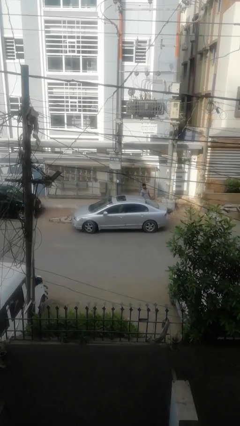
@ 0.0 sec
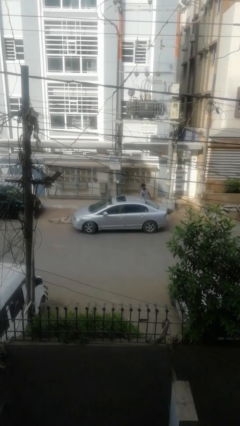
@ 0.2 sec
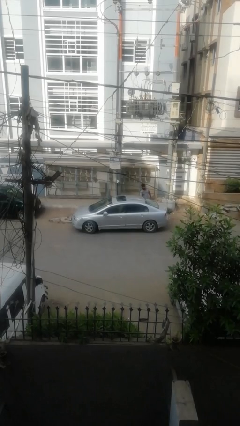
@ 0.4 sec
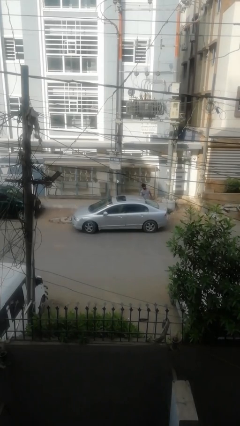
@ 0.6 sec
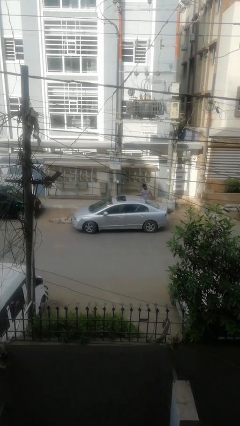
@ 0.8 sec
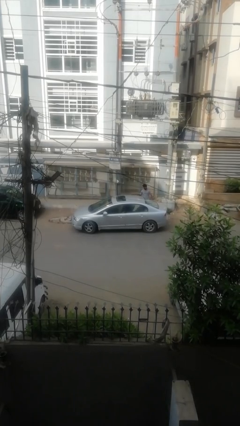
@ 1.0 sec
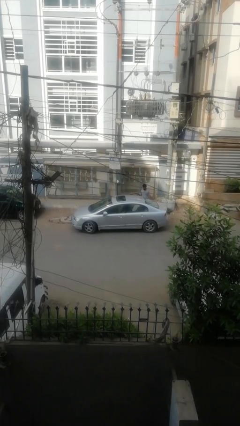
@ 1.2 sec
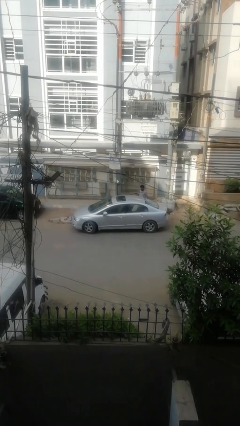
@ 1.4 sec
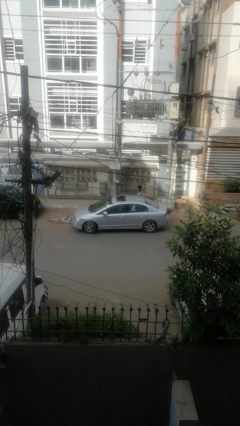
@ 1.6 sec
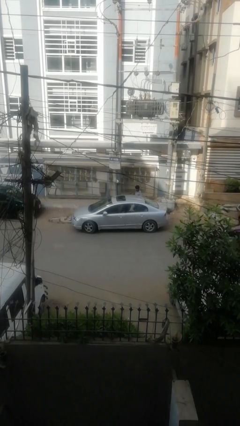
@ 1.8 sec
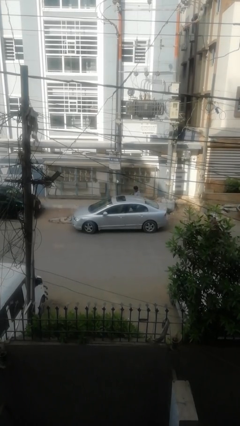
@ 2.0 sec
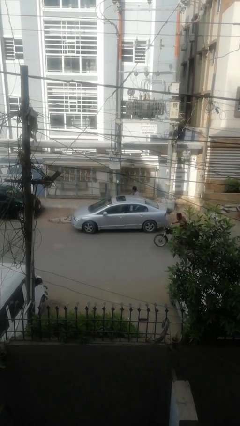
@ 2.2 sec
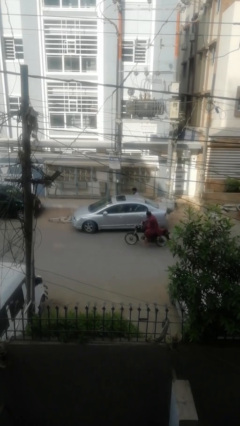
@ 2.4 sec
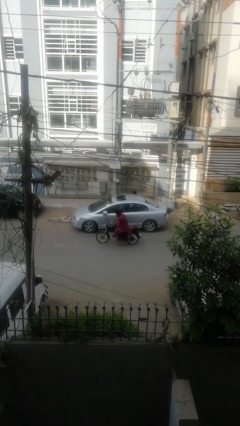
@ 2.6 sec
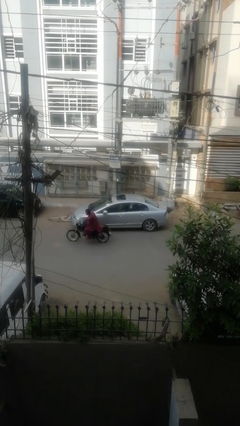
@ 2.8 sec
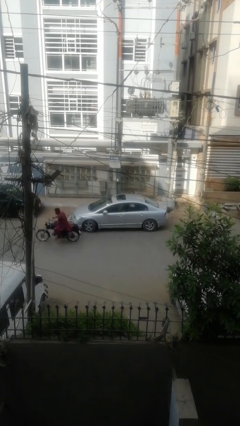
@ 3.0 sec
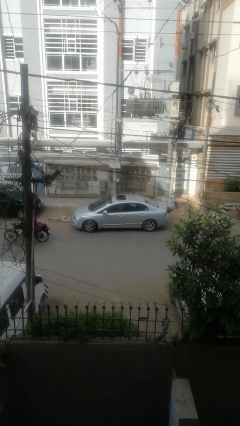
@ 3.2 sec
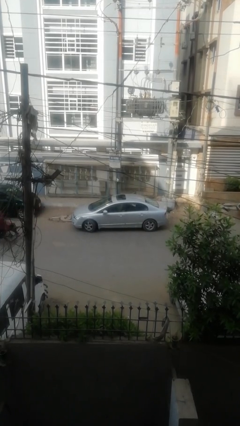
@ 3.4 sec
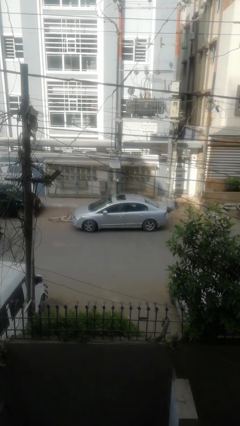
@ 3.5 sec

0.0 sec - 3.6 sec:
car picks up person

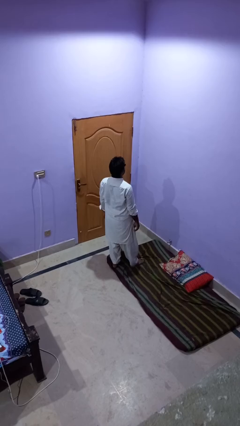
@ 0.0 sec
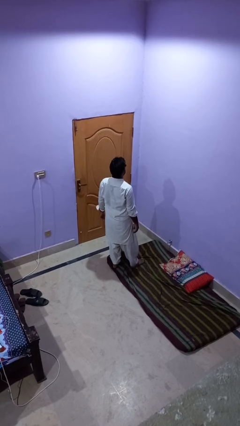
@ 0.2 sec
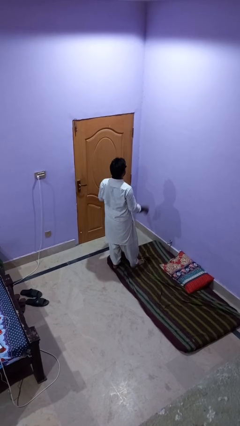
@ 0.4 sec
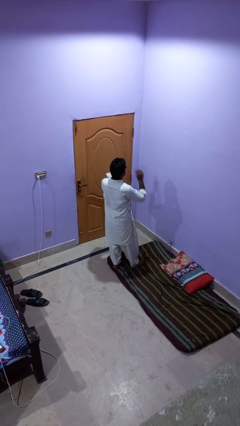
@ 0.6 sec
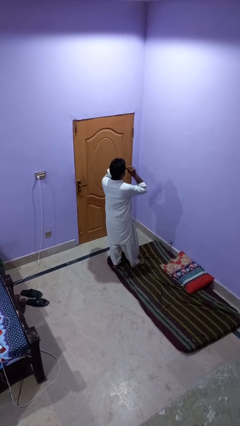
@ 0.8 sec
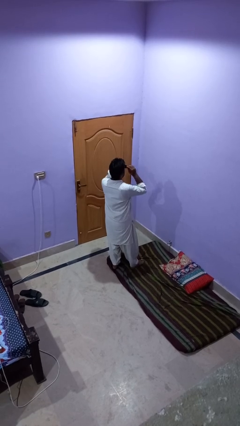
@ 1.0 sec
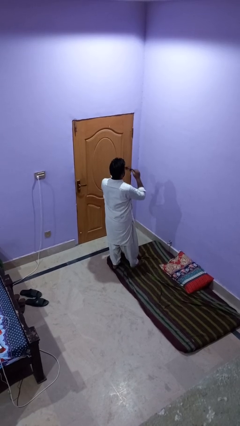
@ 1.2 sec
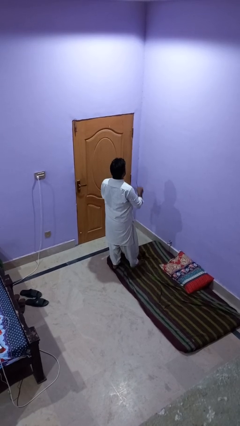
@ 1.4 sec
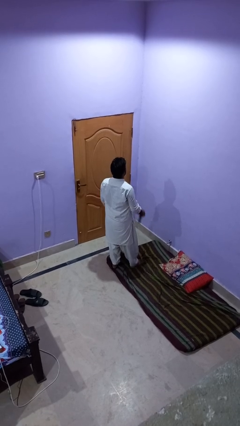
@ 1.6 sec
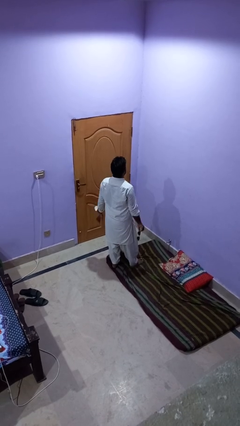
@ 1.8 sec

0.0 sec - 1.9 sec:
person takes off sunglasses

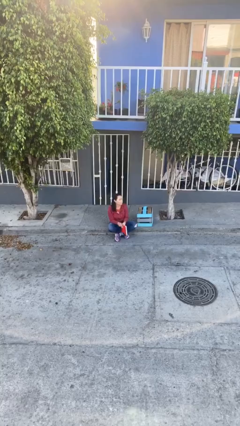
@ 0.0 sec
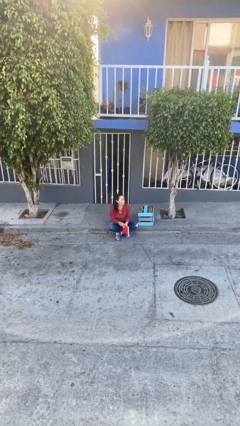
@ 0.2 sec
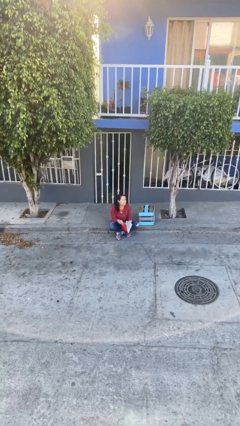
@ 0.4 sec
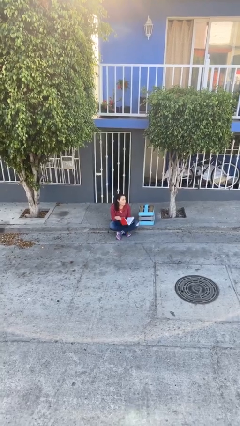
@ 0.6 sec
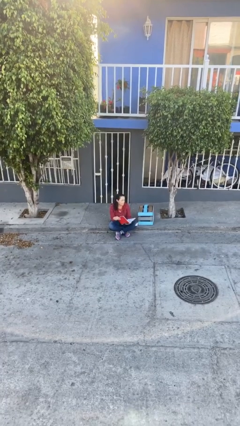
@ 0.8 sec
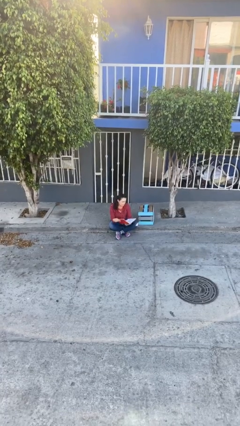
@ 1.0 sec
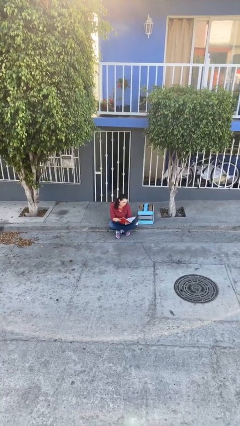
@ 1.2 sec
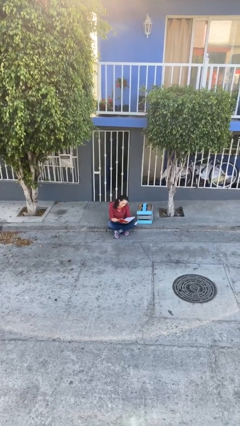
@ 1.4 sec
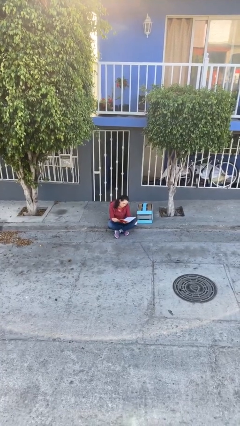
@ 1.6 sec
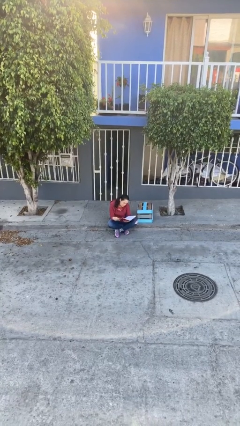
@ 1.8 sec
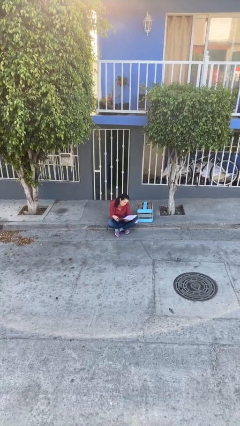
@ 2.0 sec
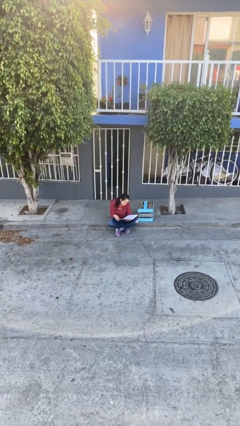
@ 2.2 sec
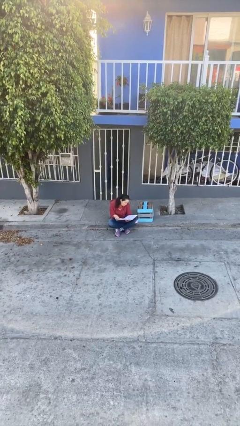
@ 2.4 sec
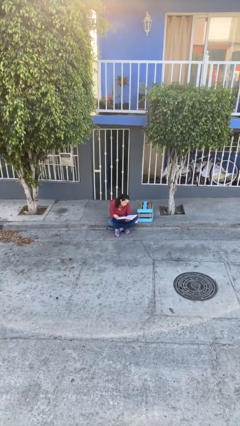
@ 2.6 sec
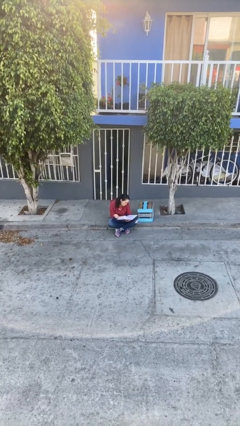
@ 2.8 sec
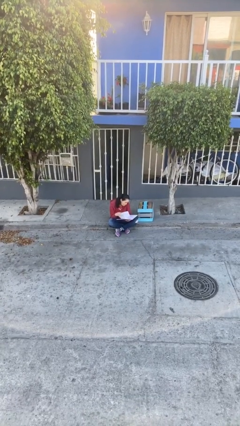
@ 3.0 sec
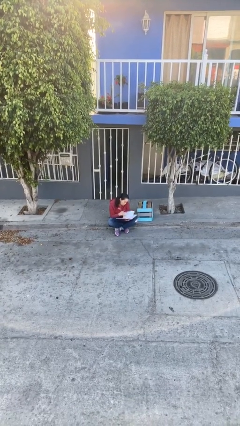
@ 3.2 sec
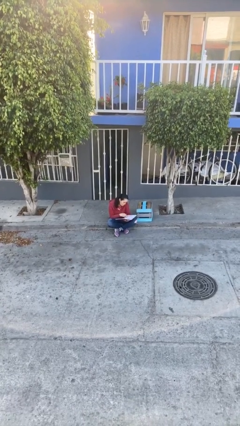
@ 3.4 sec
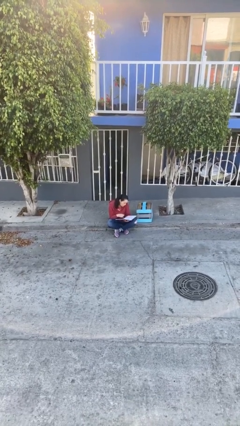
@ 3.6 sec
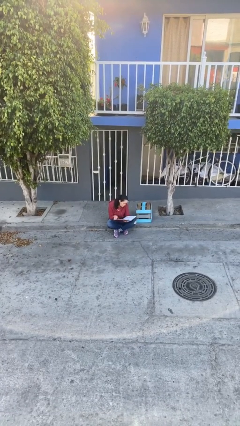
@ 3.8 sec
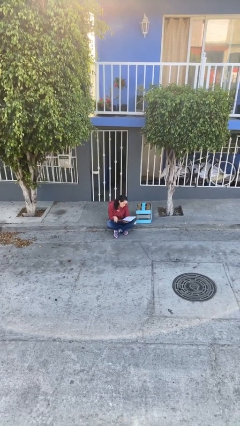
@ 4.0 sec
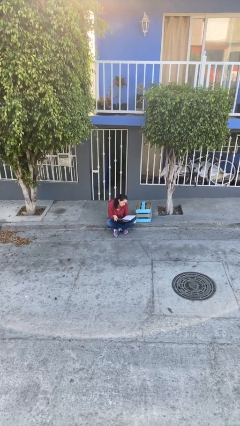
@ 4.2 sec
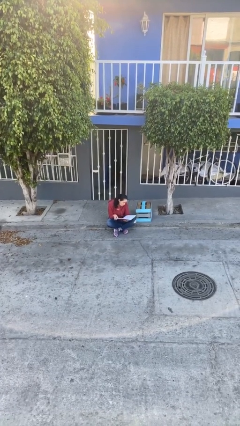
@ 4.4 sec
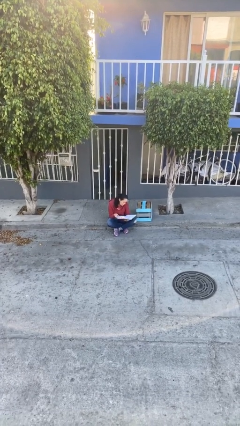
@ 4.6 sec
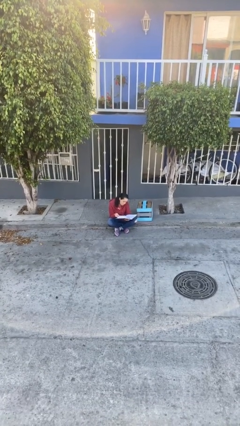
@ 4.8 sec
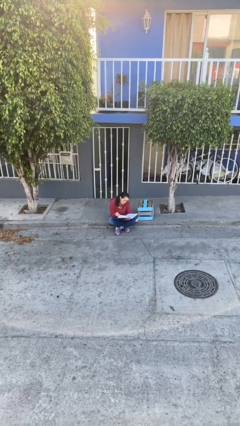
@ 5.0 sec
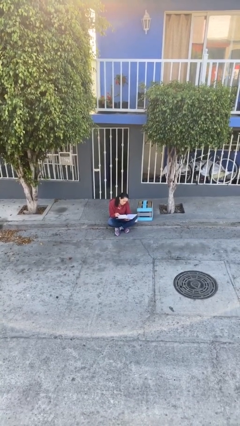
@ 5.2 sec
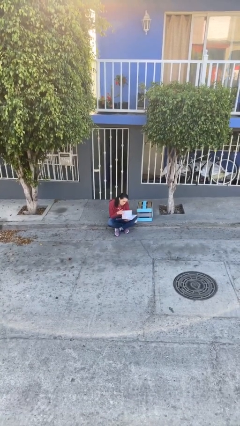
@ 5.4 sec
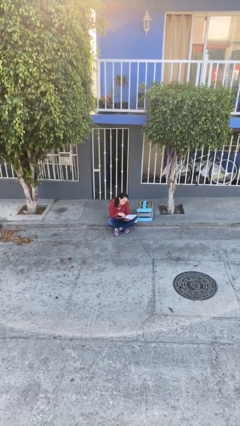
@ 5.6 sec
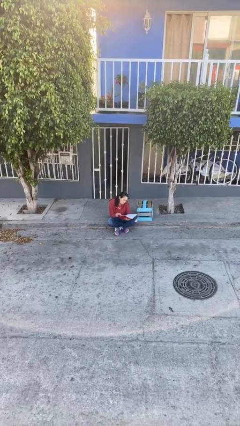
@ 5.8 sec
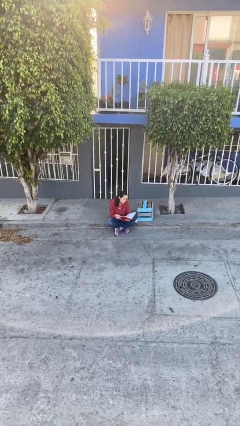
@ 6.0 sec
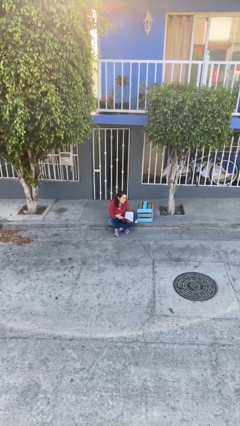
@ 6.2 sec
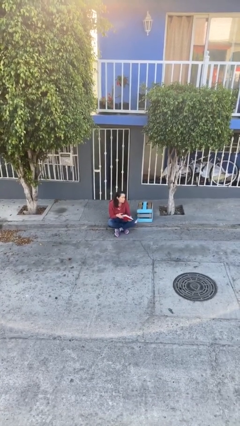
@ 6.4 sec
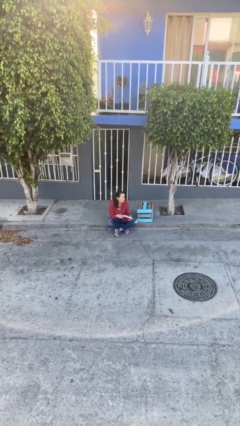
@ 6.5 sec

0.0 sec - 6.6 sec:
person reads document

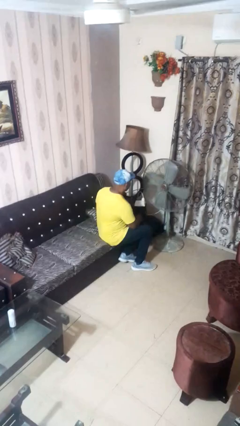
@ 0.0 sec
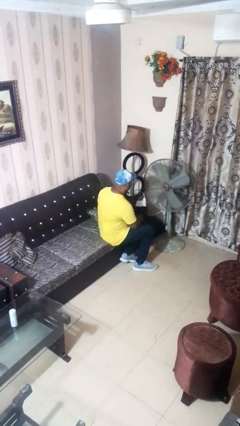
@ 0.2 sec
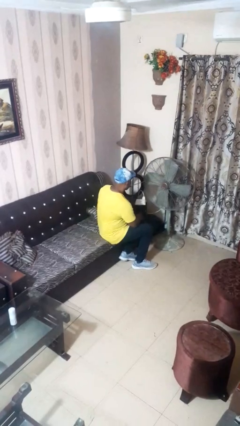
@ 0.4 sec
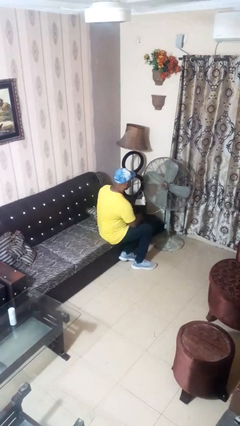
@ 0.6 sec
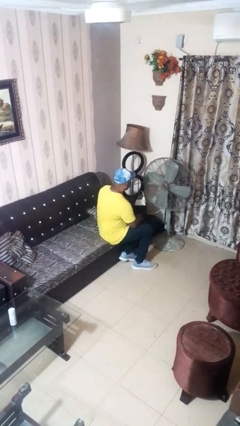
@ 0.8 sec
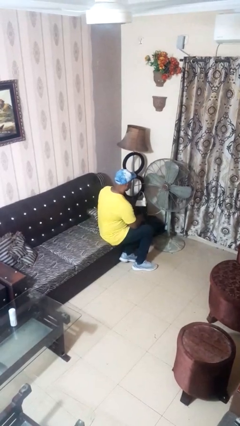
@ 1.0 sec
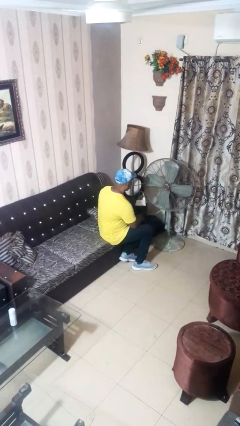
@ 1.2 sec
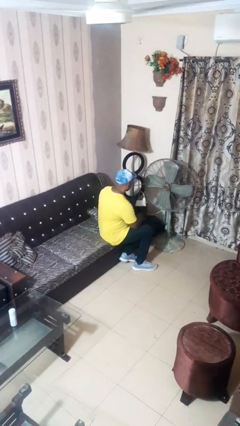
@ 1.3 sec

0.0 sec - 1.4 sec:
person turns off fan

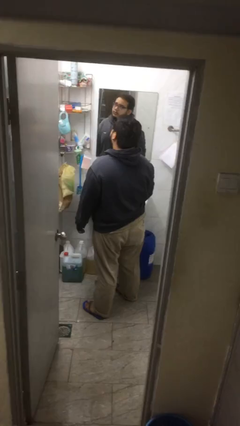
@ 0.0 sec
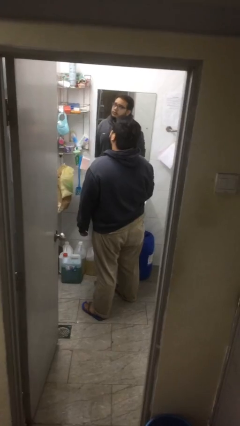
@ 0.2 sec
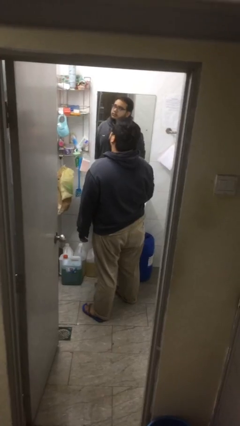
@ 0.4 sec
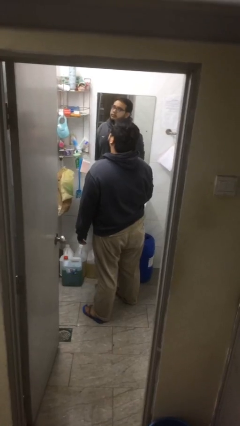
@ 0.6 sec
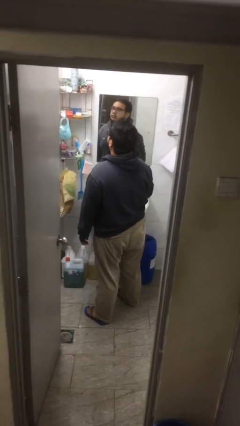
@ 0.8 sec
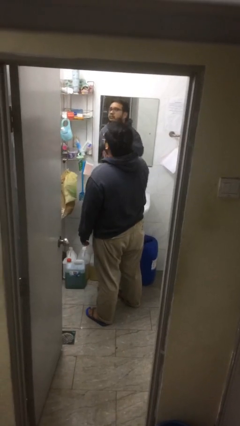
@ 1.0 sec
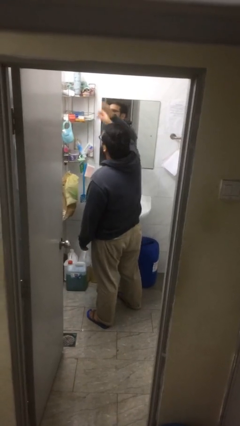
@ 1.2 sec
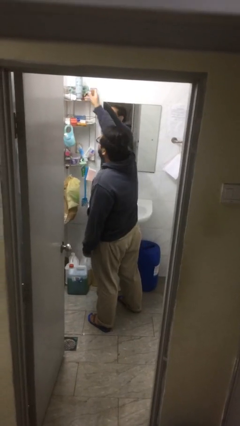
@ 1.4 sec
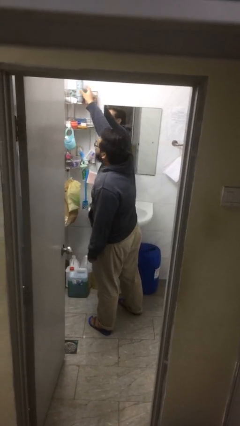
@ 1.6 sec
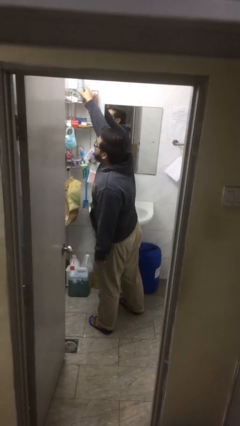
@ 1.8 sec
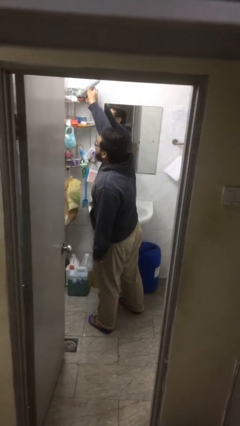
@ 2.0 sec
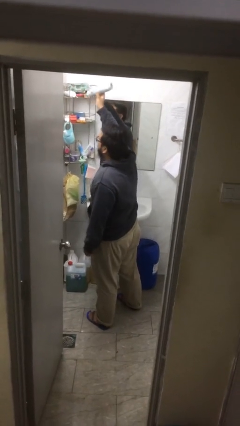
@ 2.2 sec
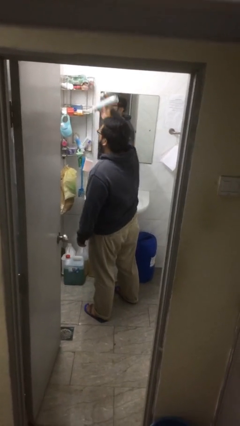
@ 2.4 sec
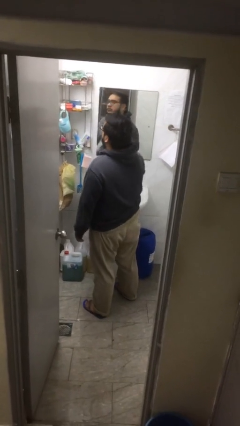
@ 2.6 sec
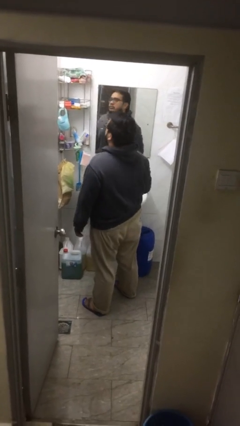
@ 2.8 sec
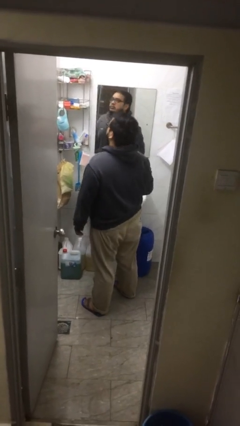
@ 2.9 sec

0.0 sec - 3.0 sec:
person picks up object from countertop

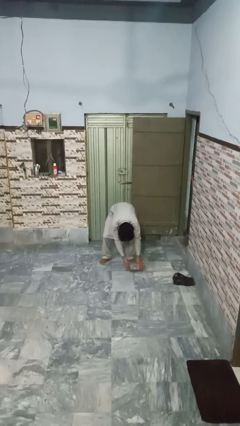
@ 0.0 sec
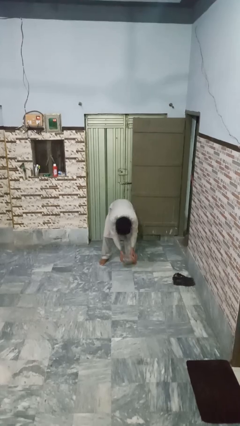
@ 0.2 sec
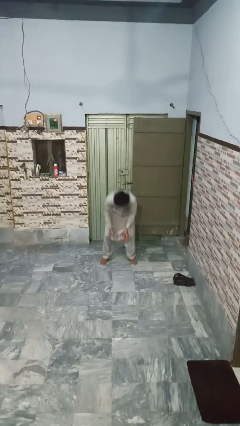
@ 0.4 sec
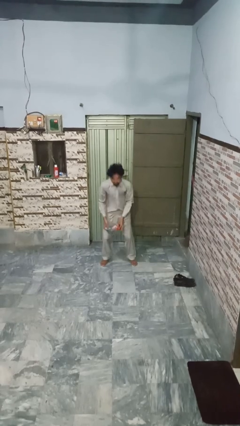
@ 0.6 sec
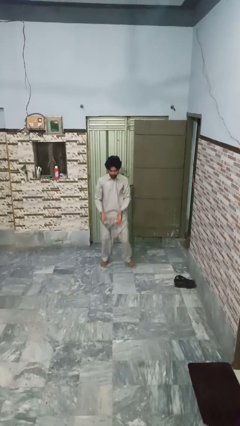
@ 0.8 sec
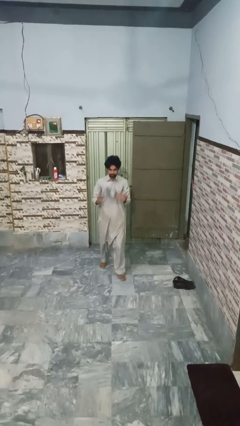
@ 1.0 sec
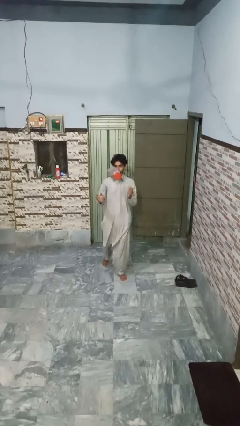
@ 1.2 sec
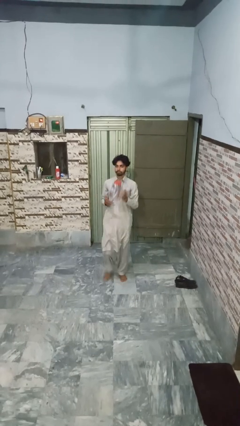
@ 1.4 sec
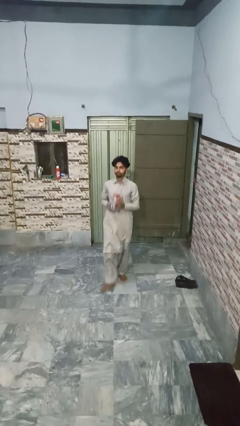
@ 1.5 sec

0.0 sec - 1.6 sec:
person picks up object from floor
